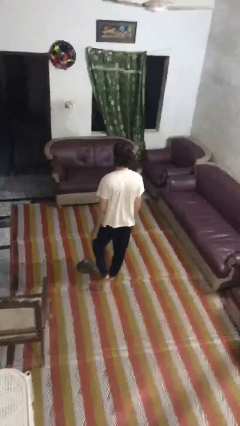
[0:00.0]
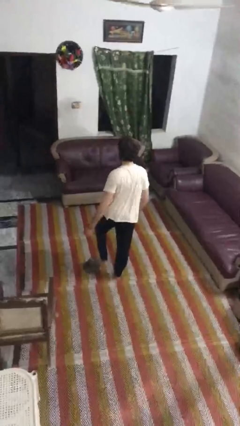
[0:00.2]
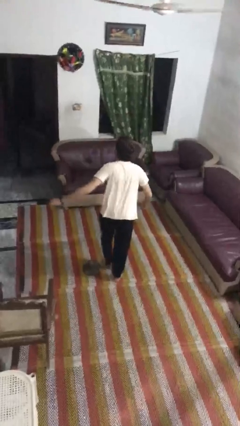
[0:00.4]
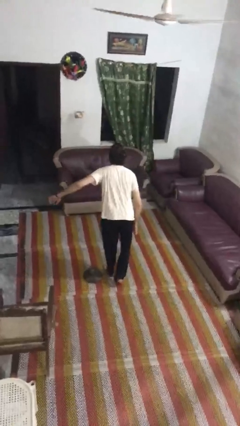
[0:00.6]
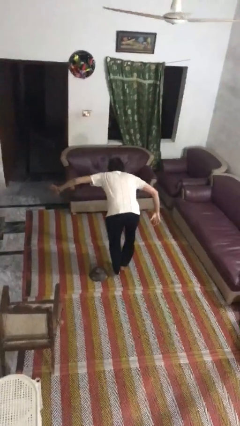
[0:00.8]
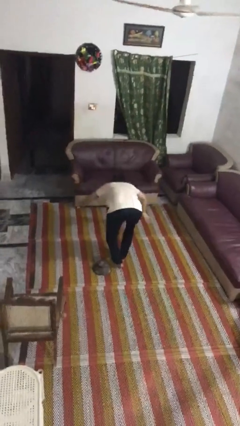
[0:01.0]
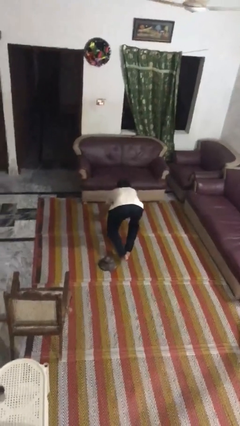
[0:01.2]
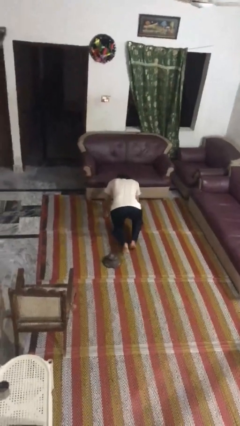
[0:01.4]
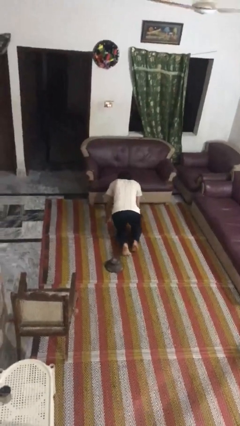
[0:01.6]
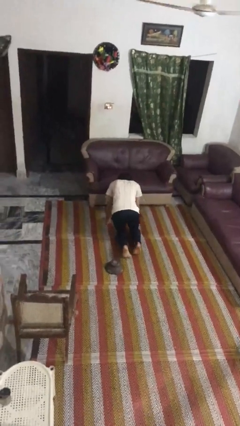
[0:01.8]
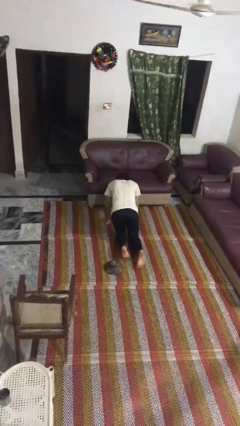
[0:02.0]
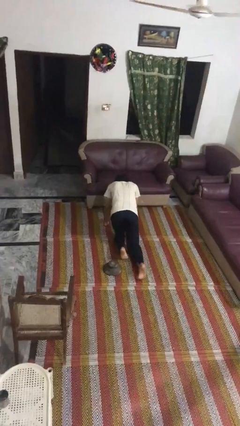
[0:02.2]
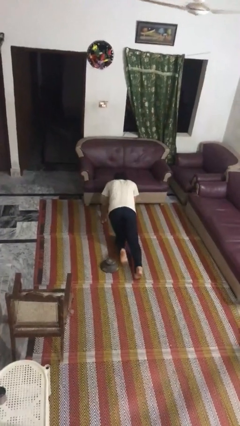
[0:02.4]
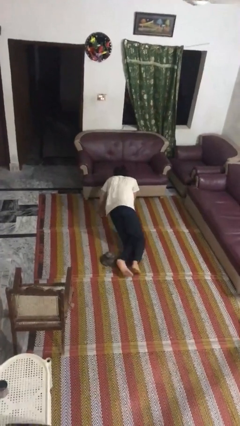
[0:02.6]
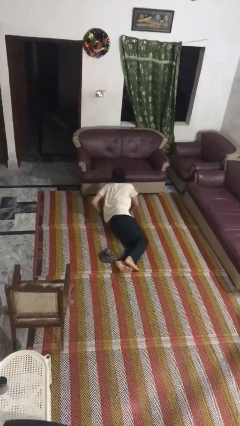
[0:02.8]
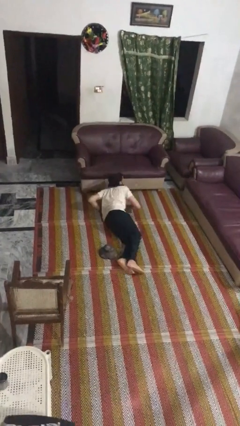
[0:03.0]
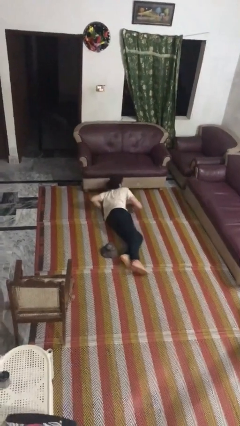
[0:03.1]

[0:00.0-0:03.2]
person trips on object on floor

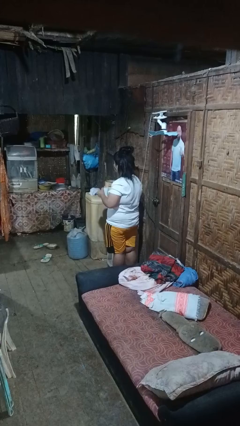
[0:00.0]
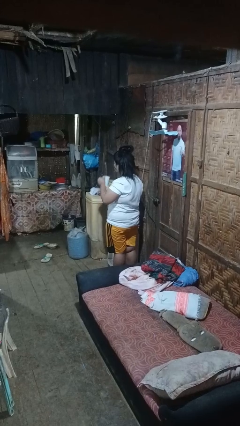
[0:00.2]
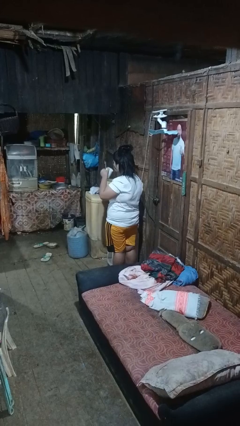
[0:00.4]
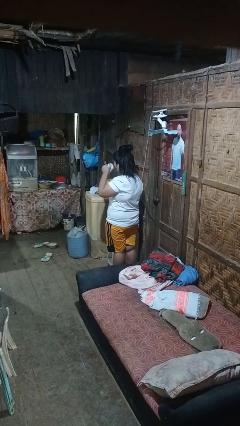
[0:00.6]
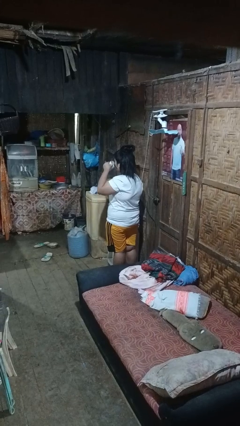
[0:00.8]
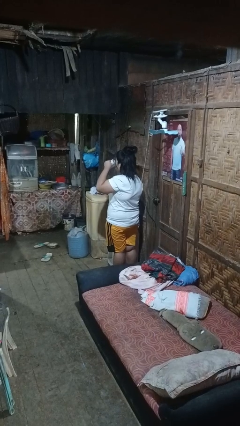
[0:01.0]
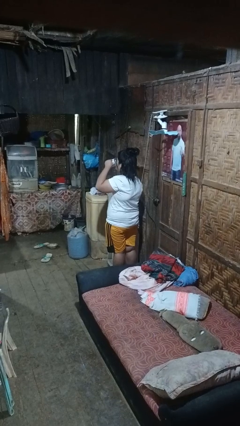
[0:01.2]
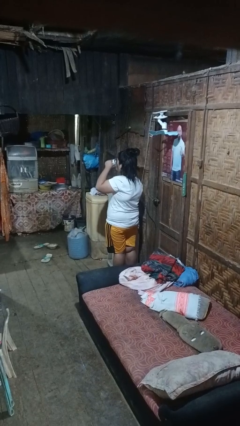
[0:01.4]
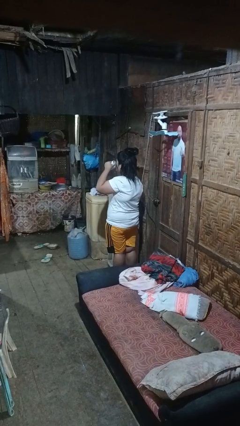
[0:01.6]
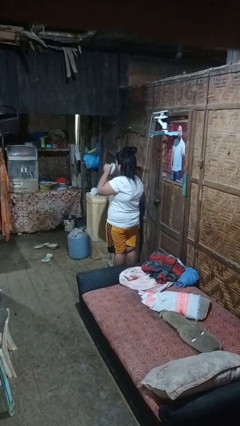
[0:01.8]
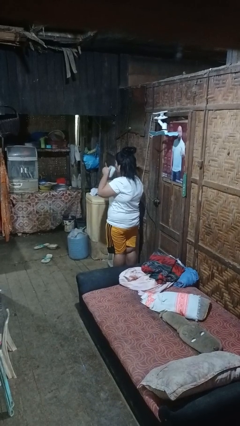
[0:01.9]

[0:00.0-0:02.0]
person drinks from mug

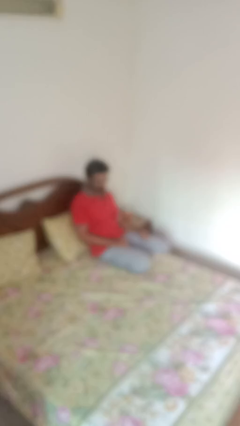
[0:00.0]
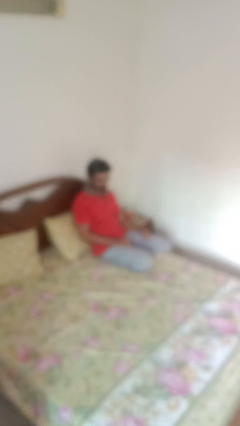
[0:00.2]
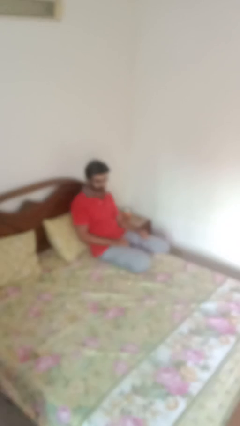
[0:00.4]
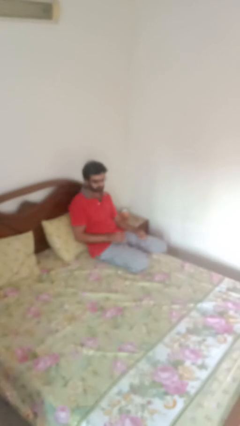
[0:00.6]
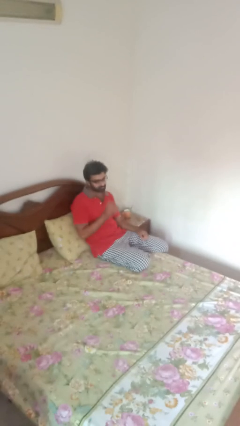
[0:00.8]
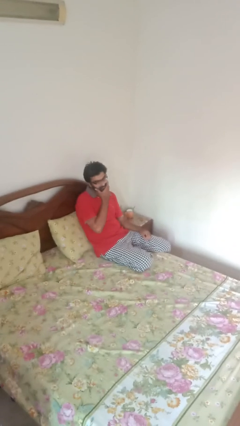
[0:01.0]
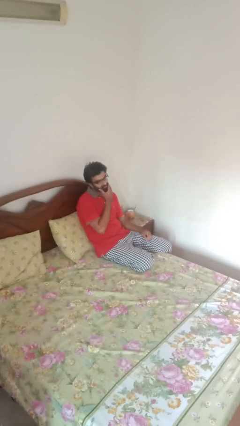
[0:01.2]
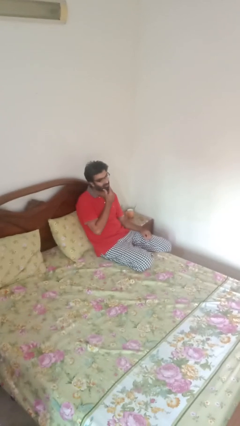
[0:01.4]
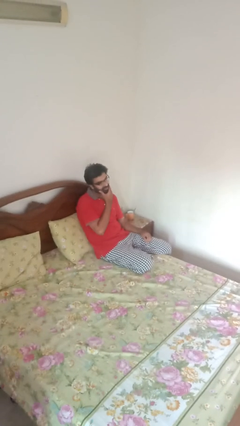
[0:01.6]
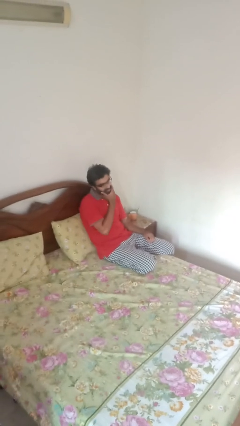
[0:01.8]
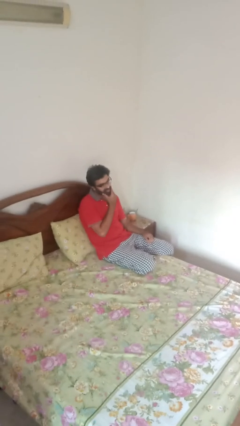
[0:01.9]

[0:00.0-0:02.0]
person strokes chin

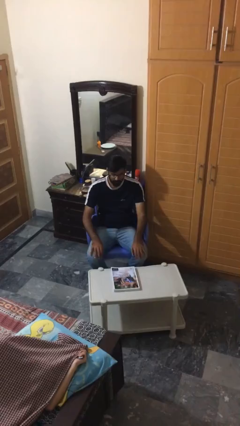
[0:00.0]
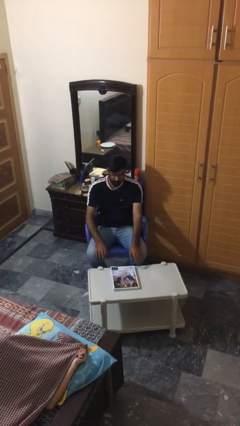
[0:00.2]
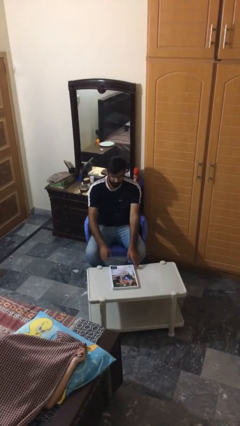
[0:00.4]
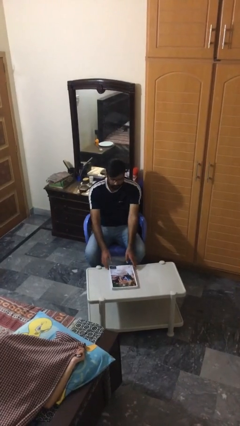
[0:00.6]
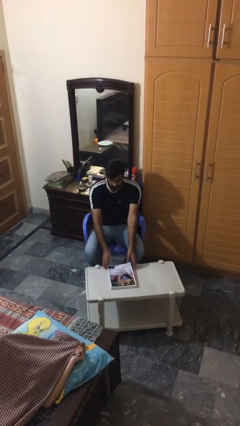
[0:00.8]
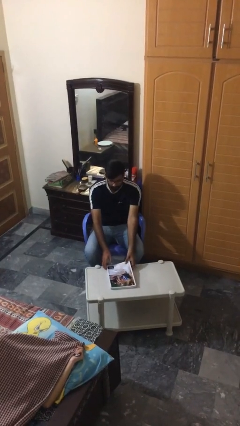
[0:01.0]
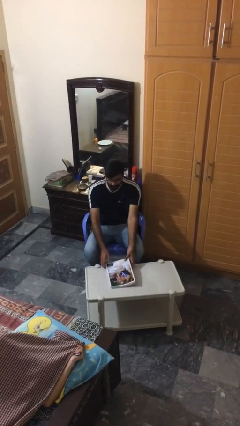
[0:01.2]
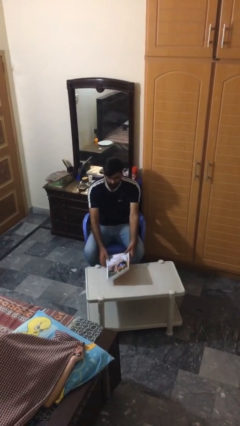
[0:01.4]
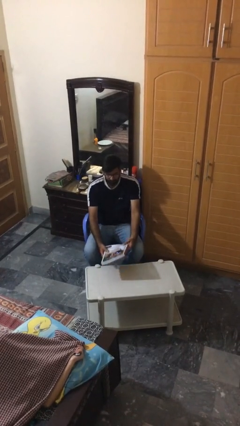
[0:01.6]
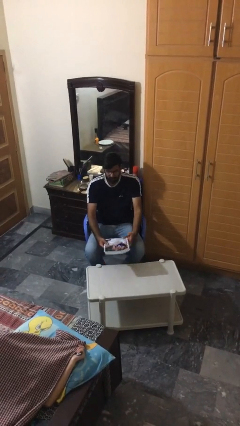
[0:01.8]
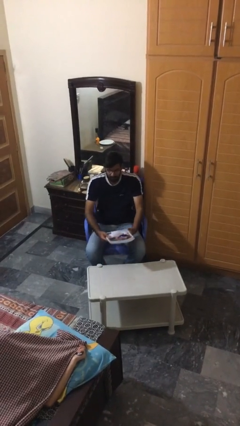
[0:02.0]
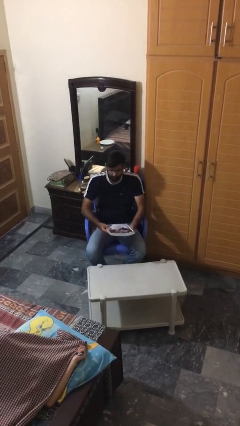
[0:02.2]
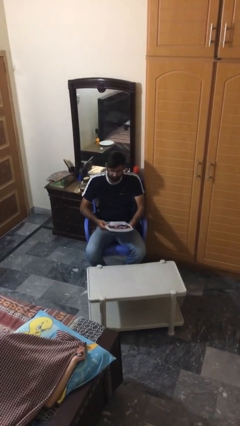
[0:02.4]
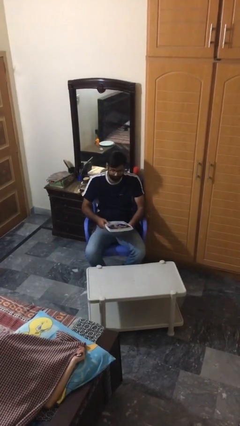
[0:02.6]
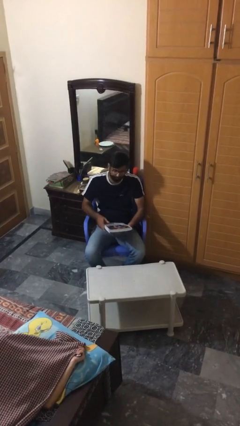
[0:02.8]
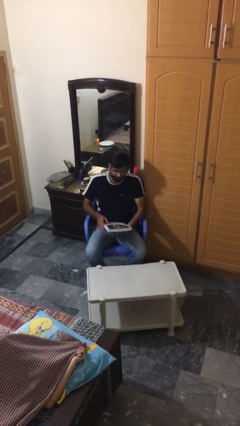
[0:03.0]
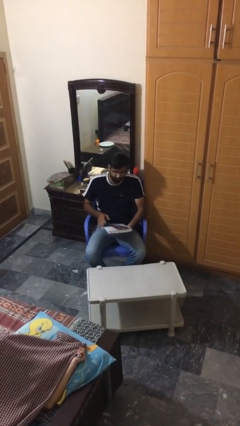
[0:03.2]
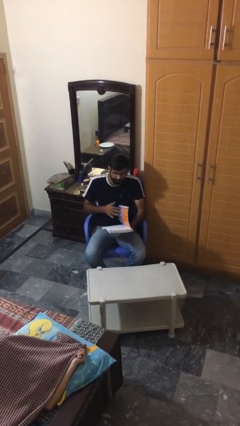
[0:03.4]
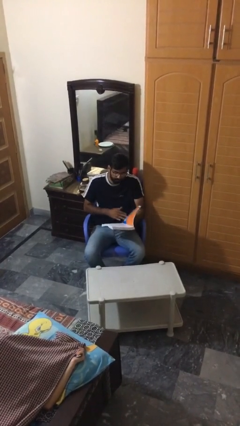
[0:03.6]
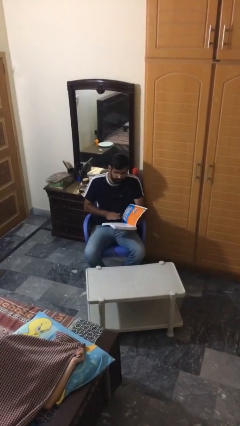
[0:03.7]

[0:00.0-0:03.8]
person picks up object from table

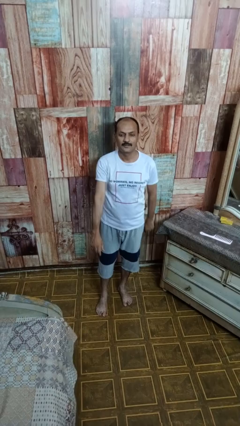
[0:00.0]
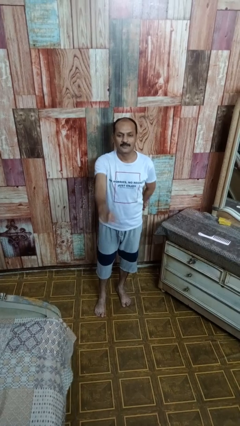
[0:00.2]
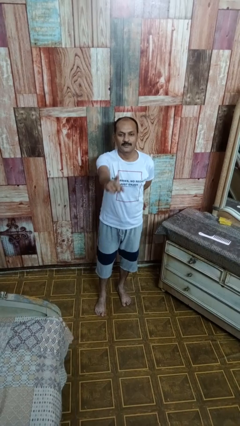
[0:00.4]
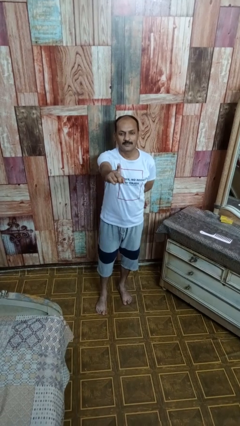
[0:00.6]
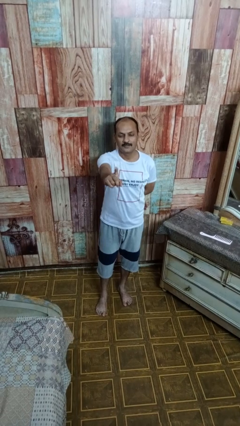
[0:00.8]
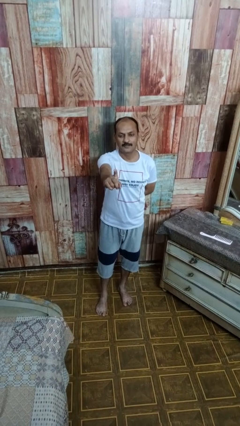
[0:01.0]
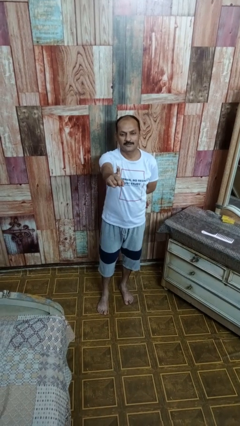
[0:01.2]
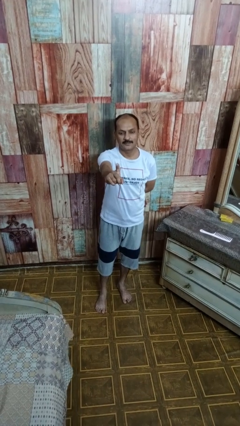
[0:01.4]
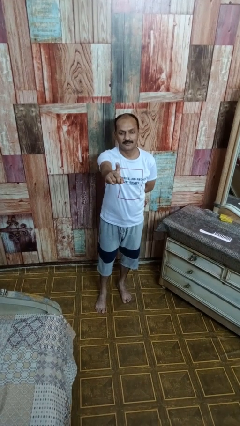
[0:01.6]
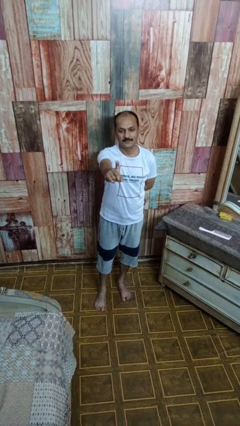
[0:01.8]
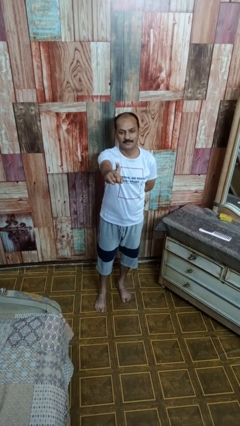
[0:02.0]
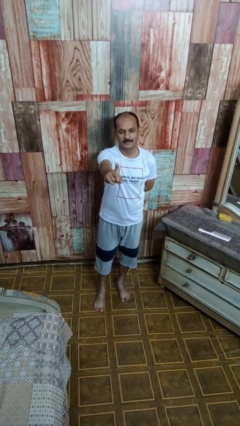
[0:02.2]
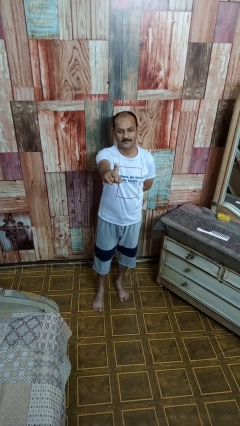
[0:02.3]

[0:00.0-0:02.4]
person gestures number one

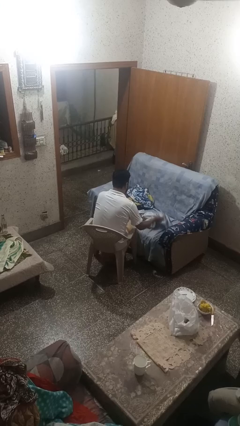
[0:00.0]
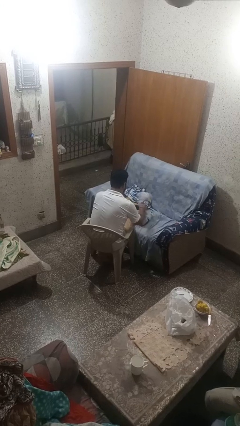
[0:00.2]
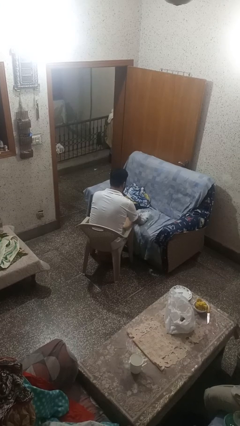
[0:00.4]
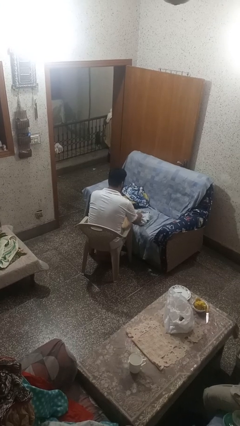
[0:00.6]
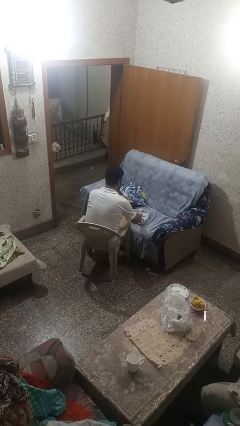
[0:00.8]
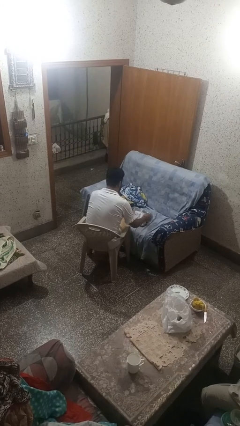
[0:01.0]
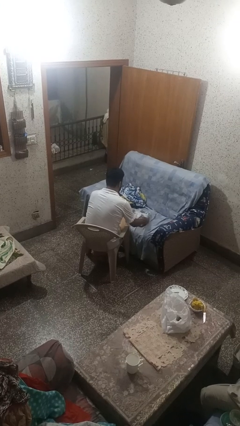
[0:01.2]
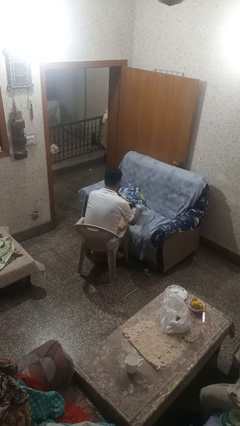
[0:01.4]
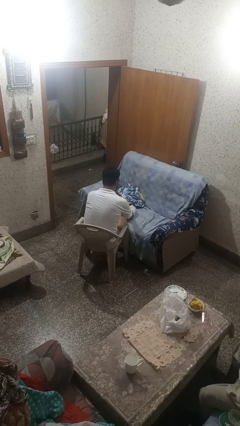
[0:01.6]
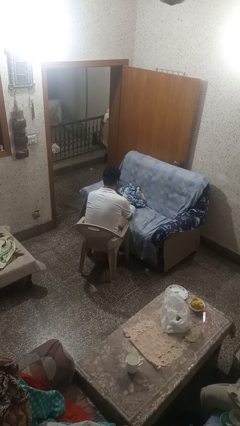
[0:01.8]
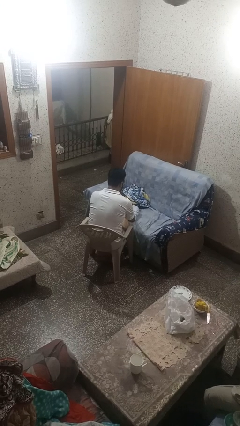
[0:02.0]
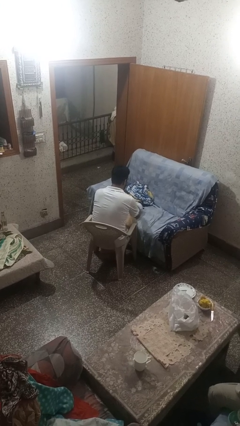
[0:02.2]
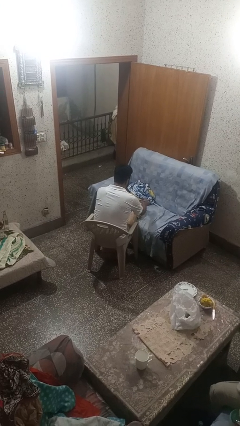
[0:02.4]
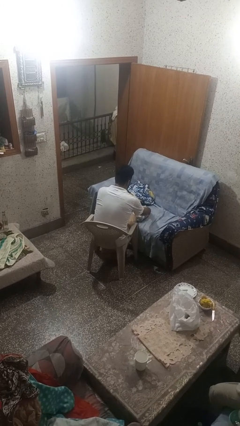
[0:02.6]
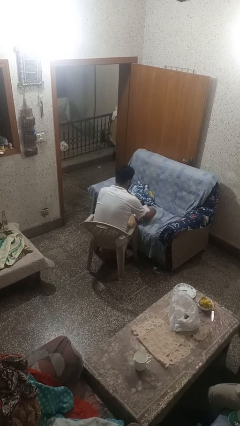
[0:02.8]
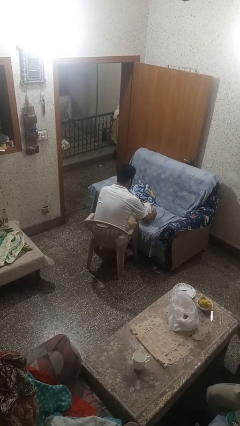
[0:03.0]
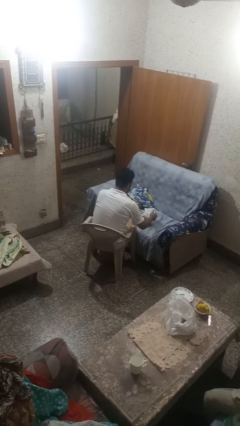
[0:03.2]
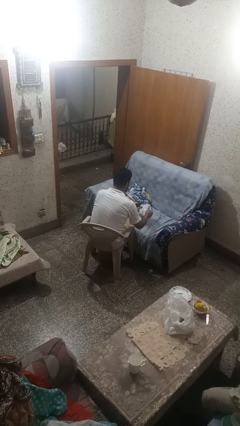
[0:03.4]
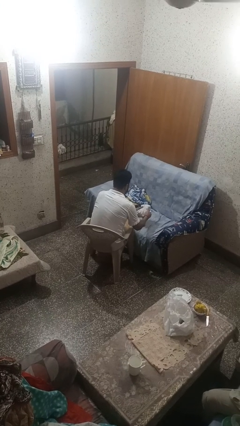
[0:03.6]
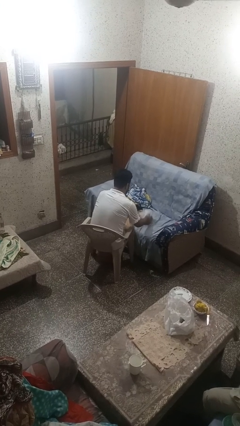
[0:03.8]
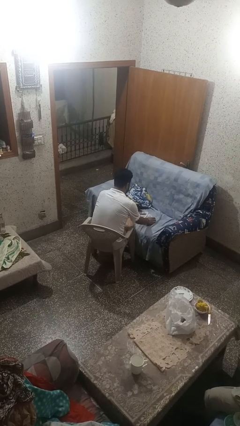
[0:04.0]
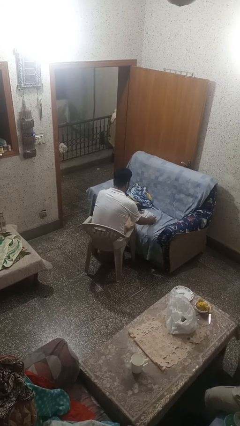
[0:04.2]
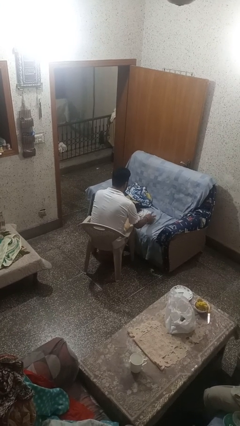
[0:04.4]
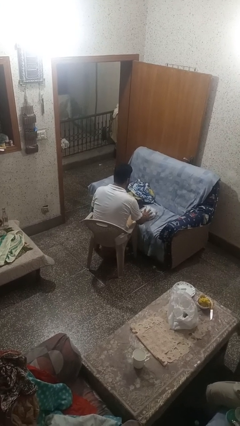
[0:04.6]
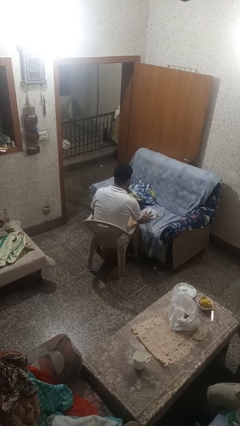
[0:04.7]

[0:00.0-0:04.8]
person folds shirt
